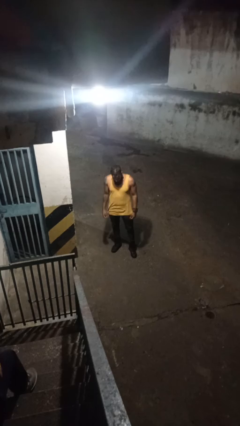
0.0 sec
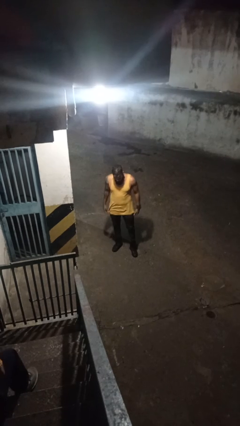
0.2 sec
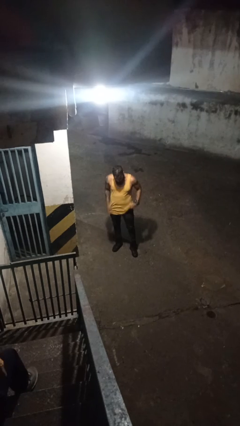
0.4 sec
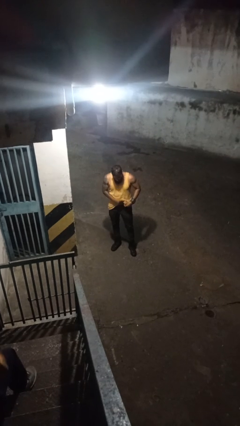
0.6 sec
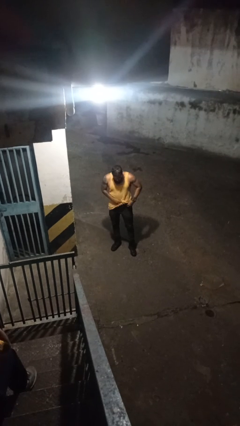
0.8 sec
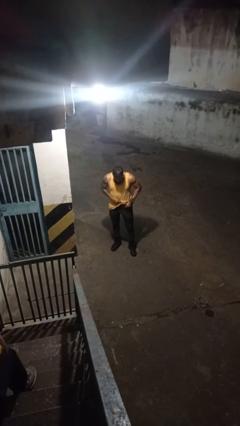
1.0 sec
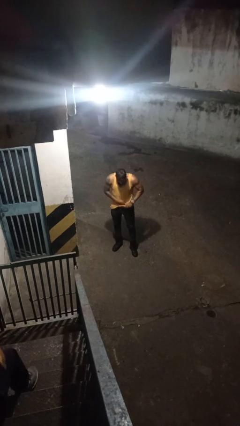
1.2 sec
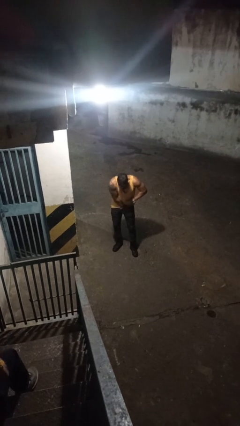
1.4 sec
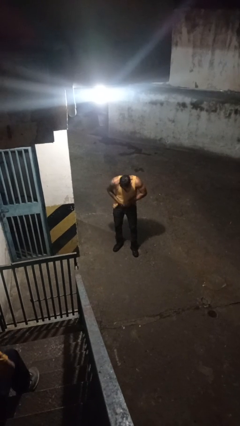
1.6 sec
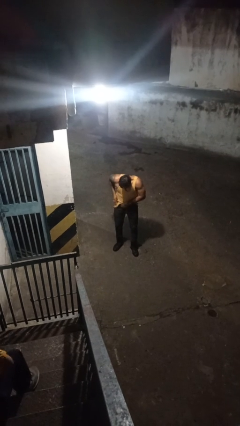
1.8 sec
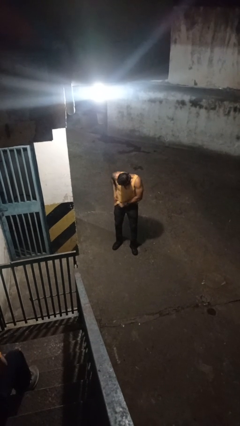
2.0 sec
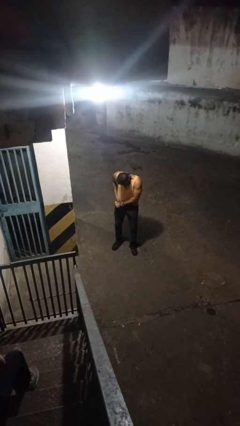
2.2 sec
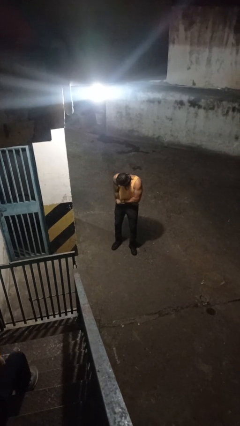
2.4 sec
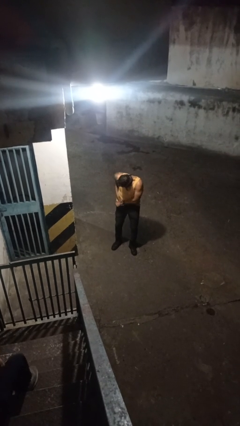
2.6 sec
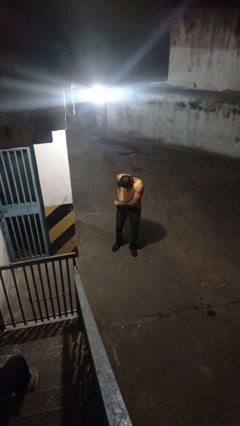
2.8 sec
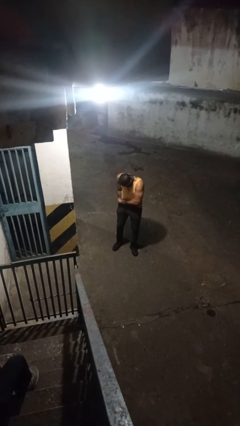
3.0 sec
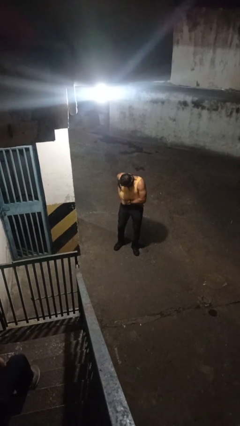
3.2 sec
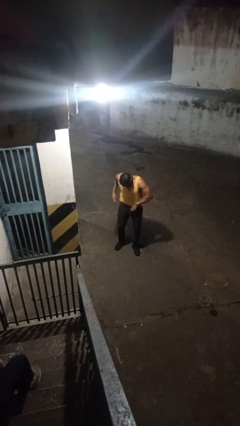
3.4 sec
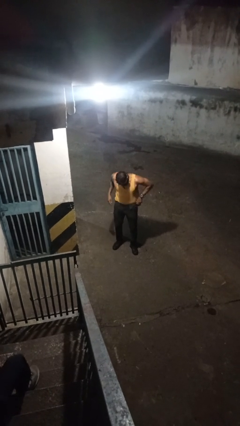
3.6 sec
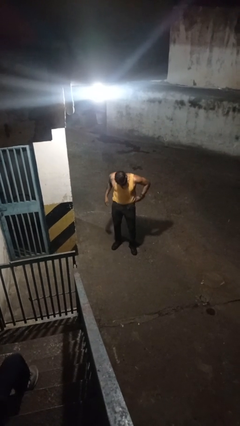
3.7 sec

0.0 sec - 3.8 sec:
person tucks in shirt

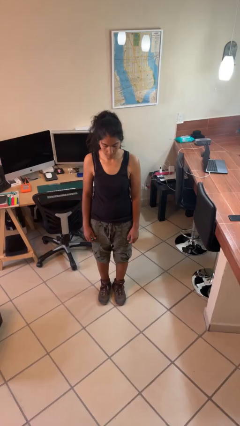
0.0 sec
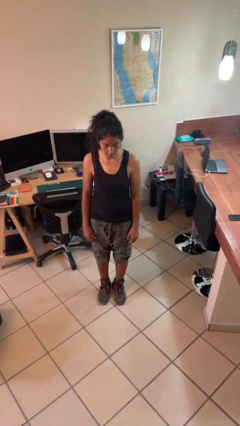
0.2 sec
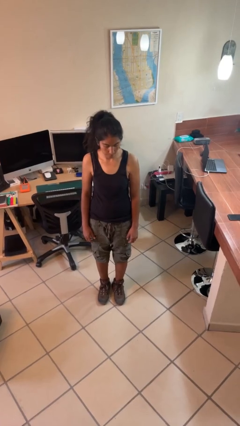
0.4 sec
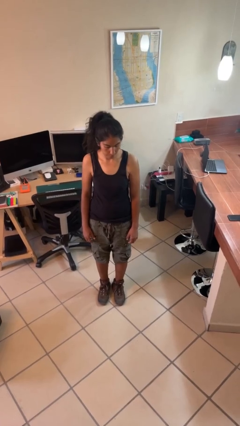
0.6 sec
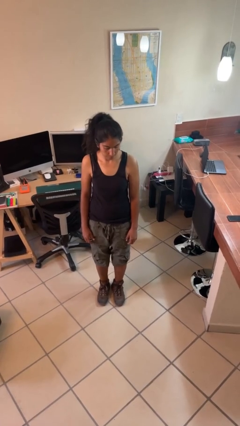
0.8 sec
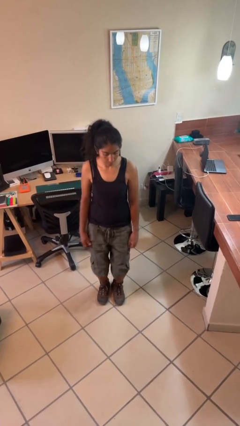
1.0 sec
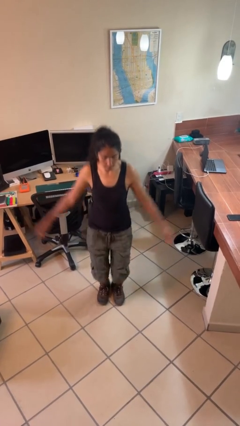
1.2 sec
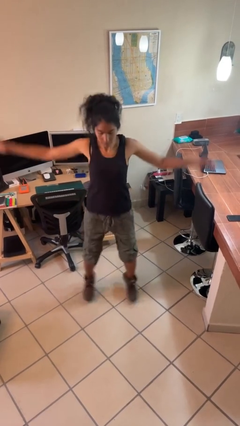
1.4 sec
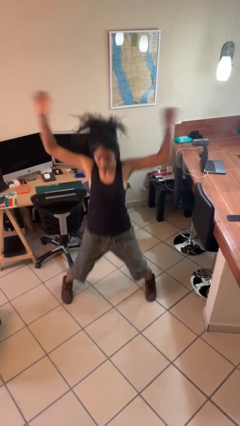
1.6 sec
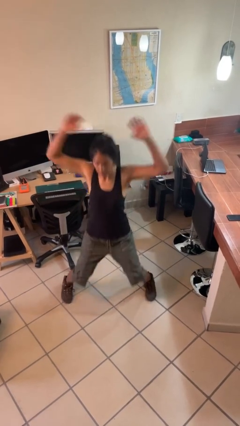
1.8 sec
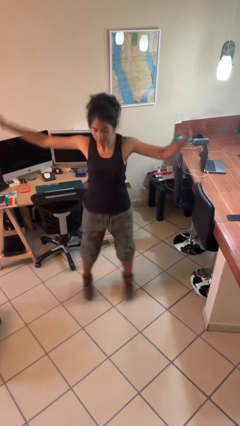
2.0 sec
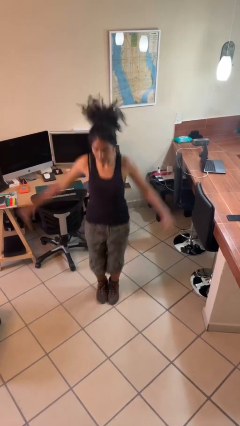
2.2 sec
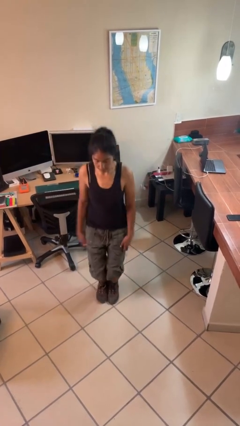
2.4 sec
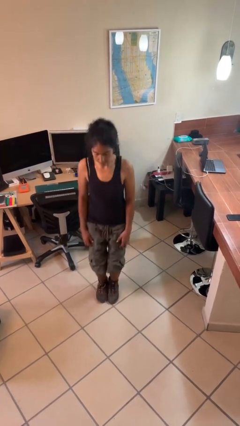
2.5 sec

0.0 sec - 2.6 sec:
person exercises with jumping jacks

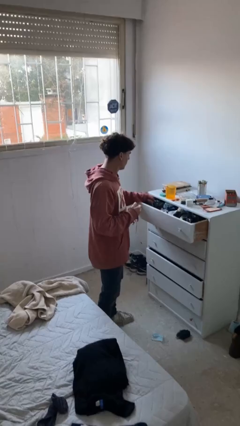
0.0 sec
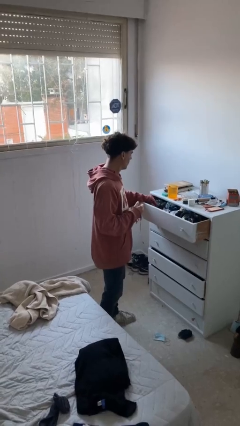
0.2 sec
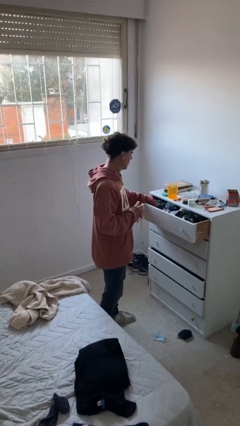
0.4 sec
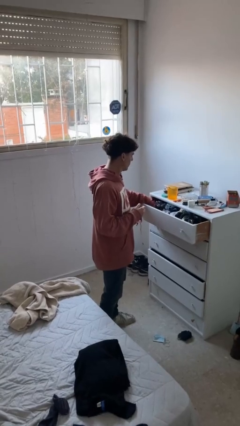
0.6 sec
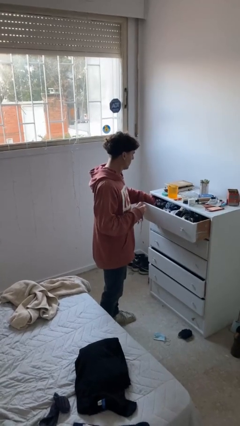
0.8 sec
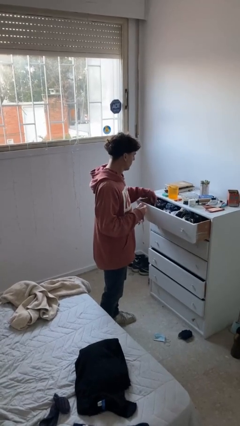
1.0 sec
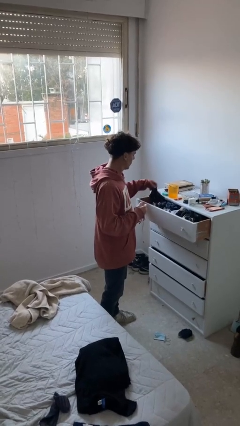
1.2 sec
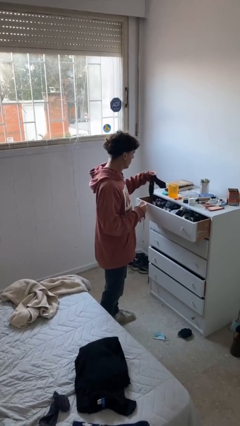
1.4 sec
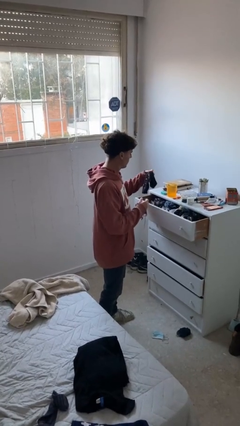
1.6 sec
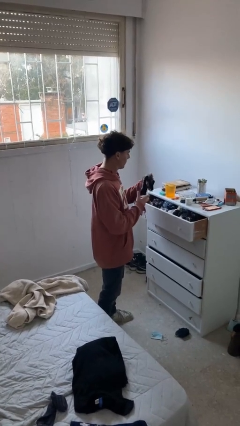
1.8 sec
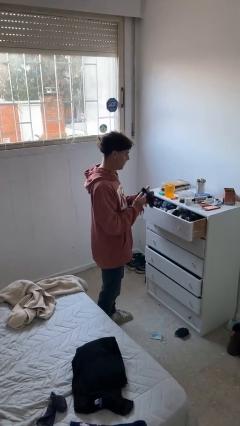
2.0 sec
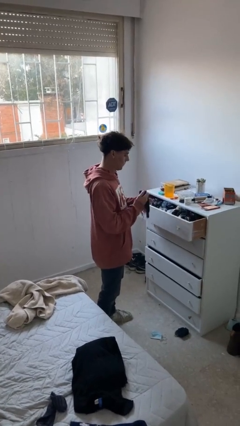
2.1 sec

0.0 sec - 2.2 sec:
person takes clothes from dresser

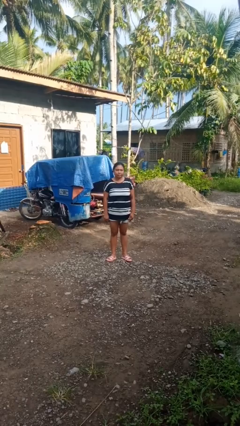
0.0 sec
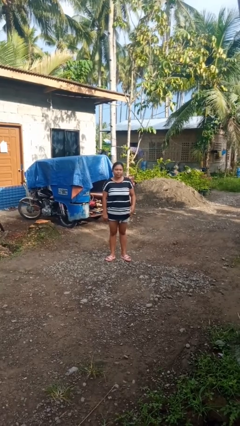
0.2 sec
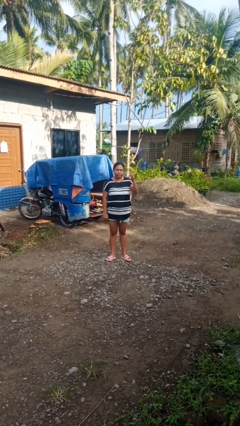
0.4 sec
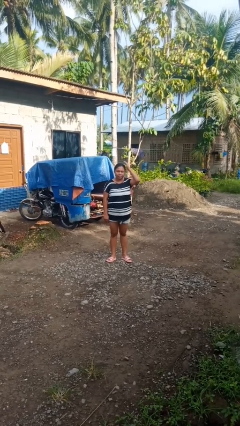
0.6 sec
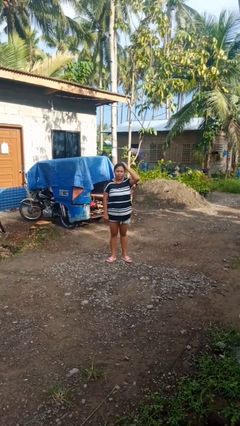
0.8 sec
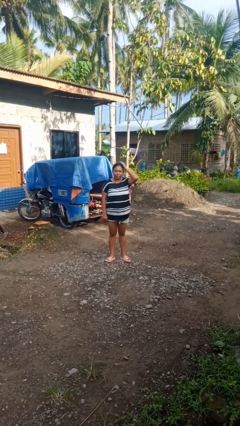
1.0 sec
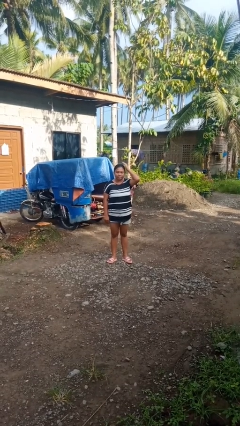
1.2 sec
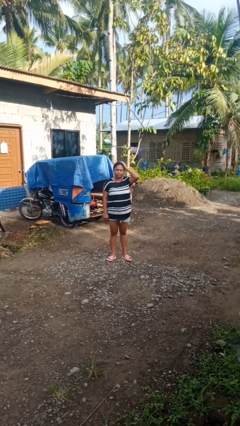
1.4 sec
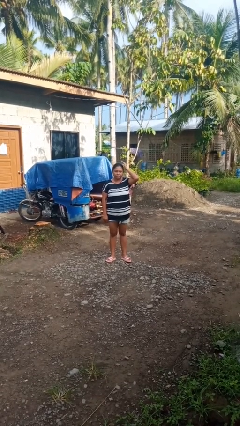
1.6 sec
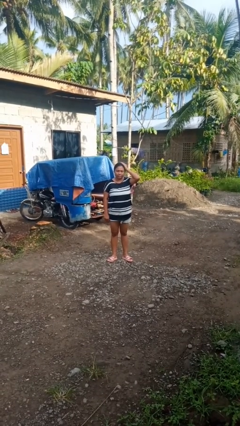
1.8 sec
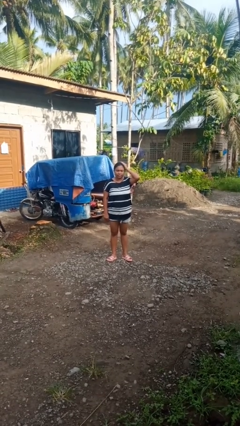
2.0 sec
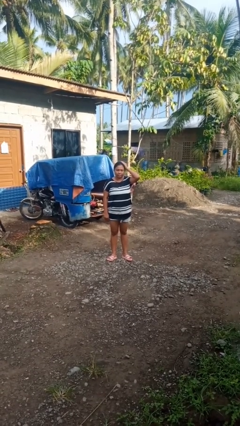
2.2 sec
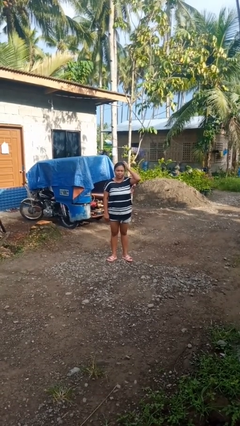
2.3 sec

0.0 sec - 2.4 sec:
person pats head

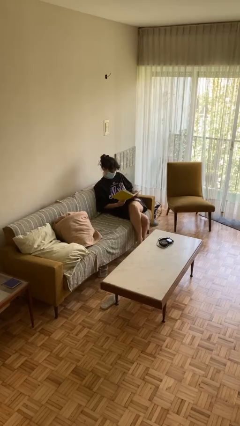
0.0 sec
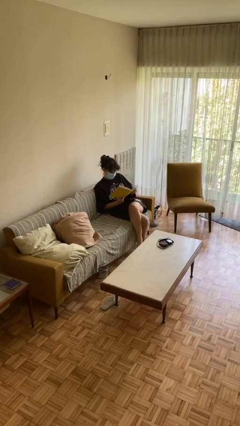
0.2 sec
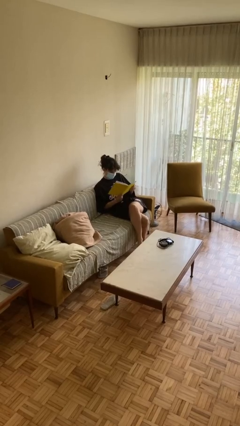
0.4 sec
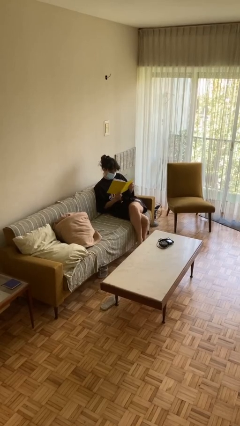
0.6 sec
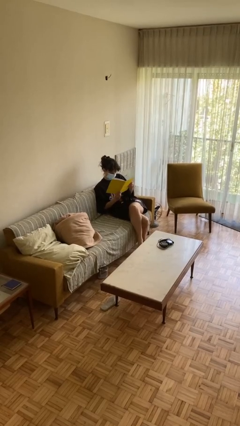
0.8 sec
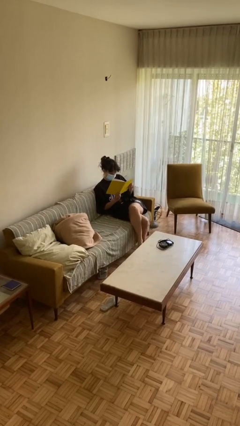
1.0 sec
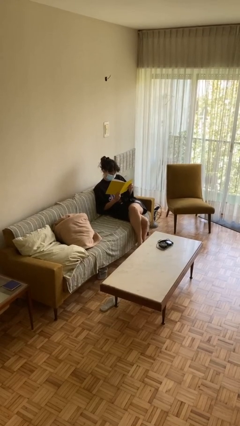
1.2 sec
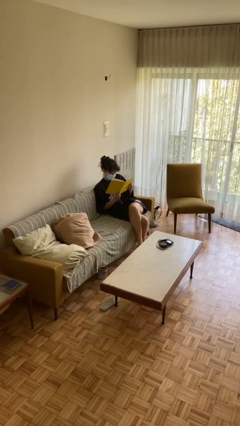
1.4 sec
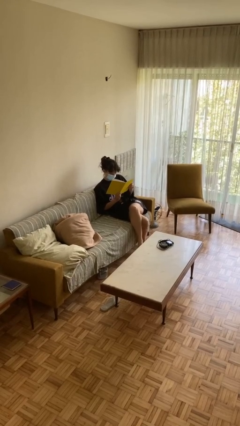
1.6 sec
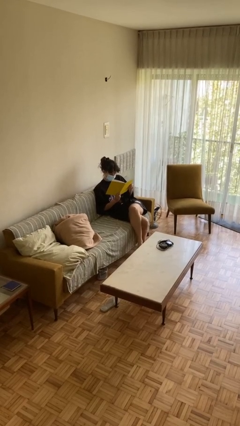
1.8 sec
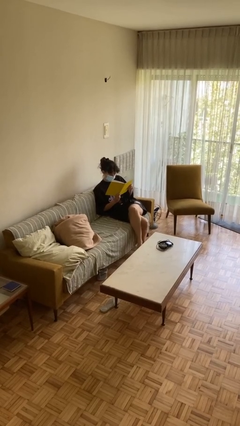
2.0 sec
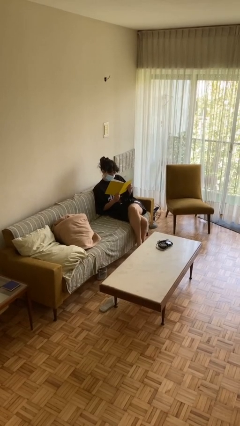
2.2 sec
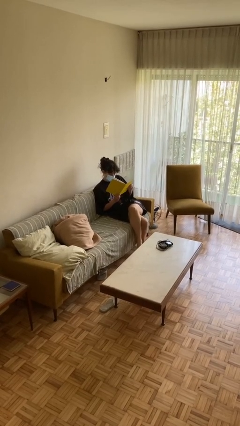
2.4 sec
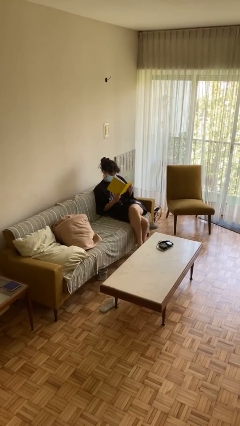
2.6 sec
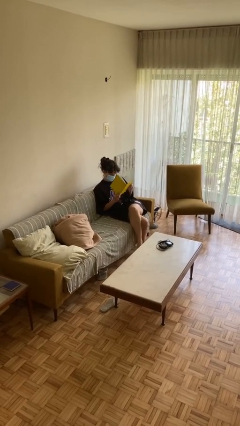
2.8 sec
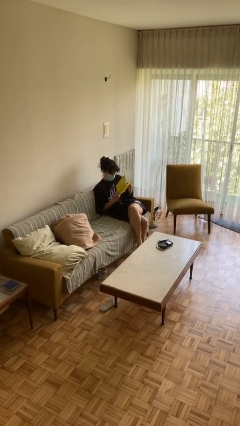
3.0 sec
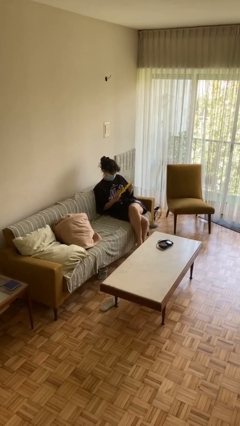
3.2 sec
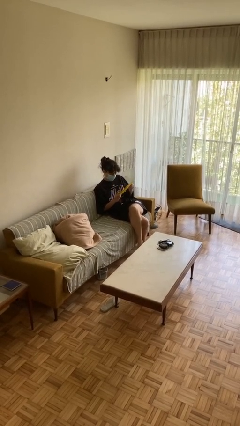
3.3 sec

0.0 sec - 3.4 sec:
person reads document

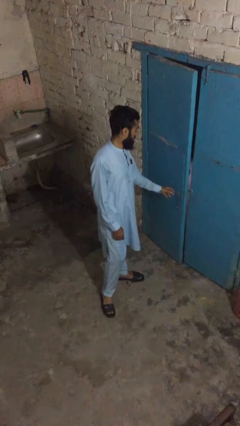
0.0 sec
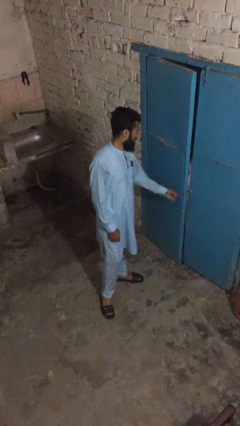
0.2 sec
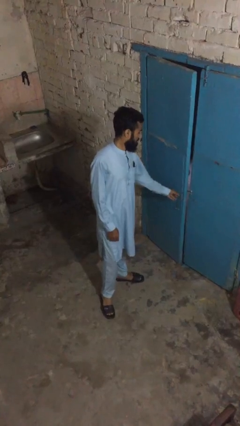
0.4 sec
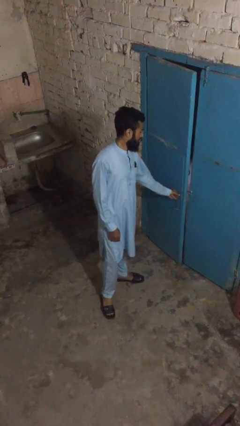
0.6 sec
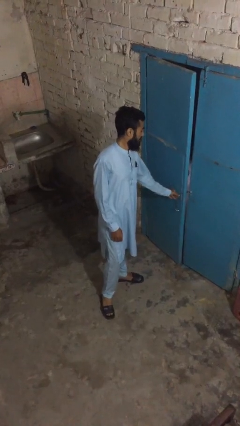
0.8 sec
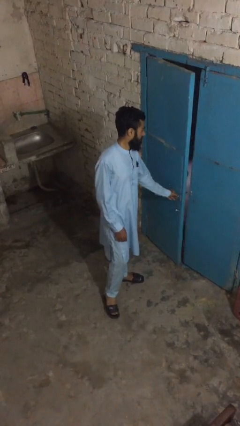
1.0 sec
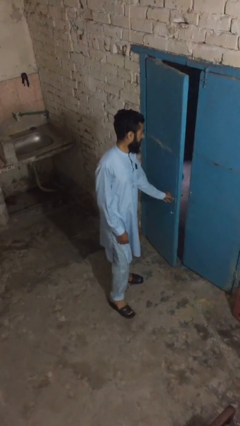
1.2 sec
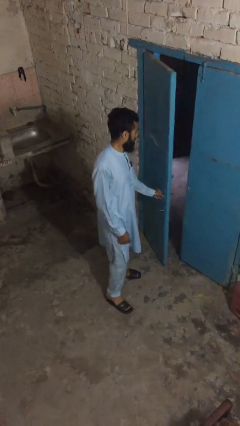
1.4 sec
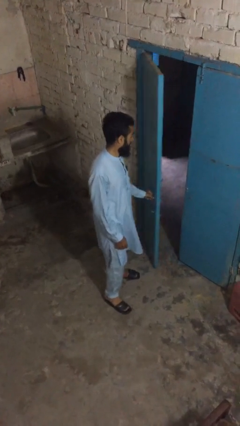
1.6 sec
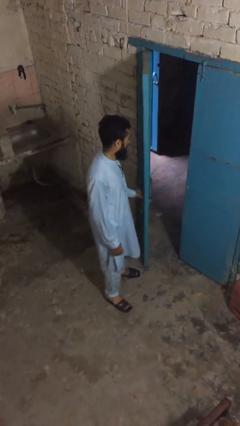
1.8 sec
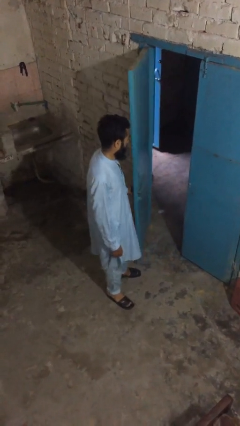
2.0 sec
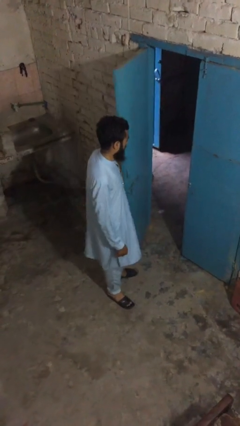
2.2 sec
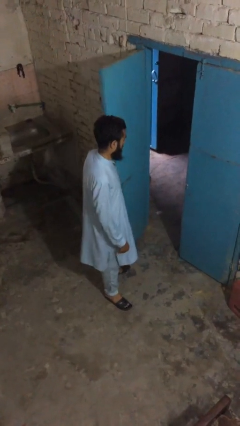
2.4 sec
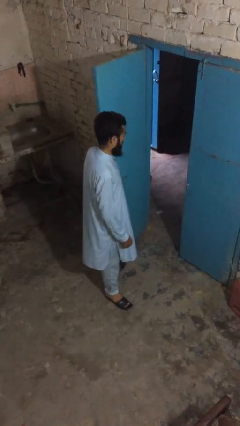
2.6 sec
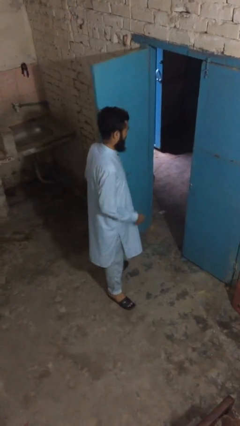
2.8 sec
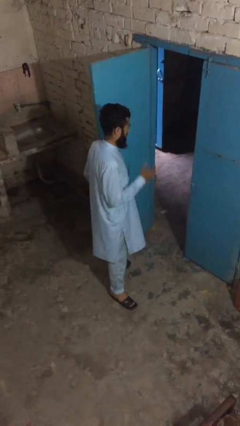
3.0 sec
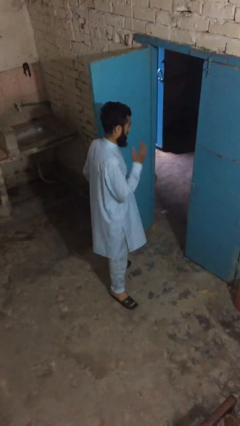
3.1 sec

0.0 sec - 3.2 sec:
person opens facility door
